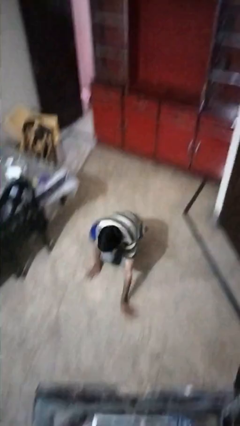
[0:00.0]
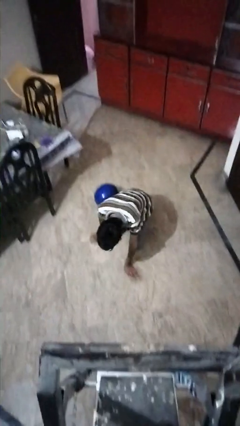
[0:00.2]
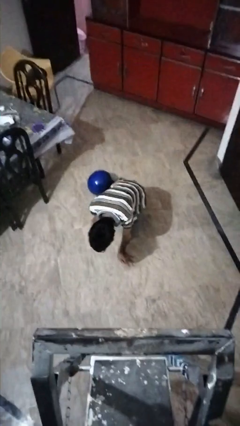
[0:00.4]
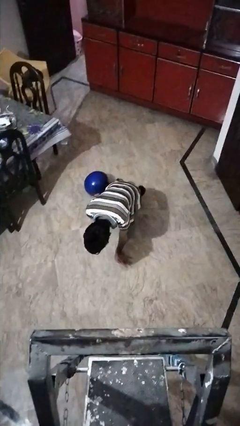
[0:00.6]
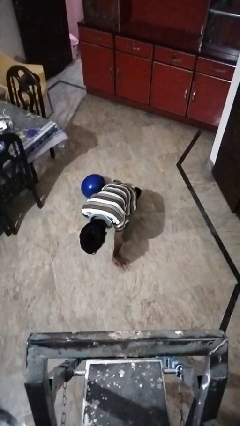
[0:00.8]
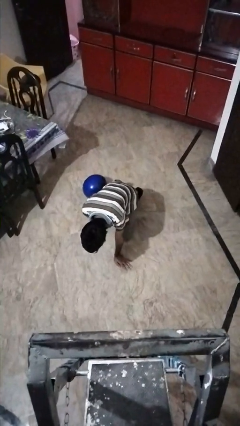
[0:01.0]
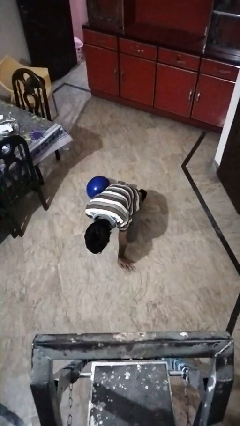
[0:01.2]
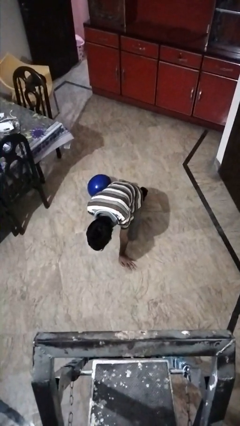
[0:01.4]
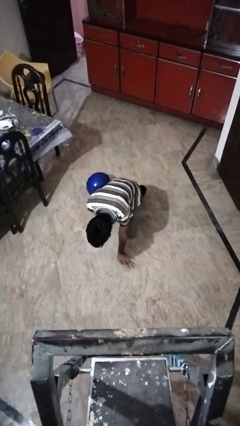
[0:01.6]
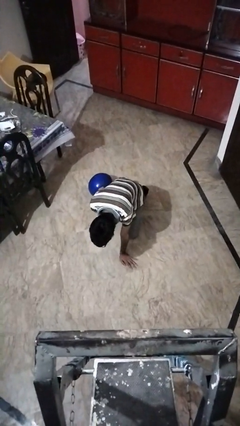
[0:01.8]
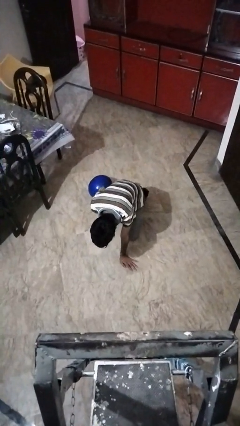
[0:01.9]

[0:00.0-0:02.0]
person trips on object on floor

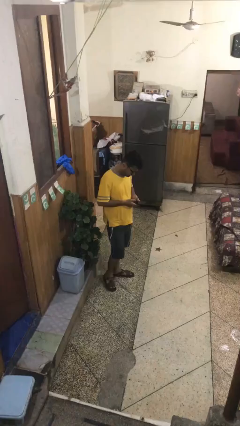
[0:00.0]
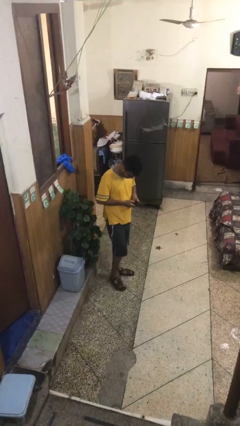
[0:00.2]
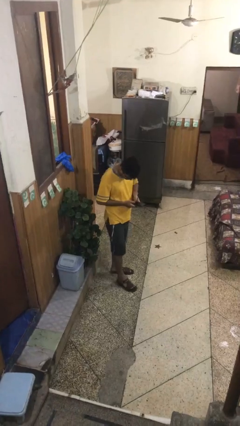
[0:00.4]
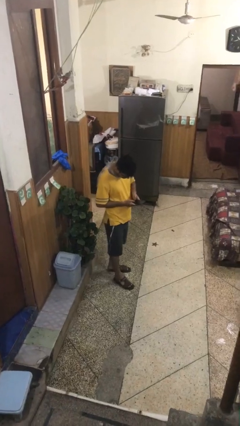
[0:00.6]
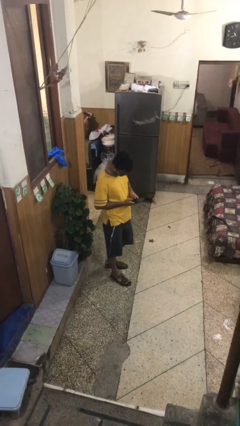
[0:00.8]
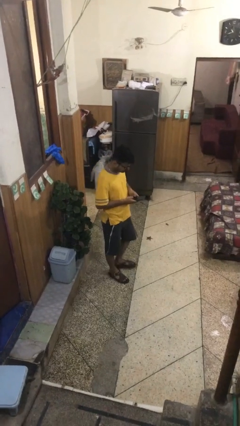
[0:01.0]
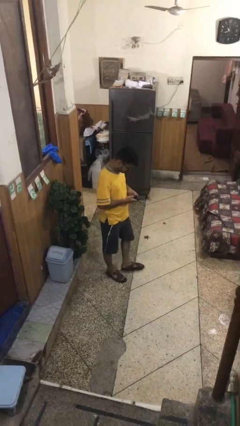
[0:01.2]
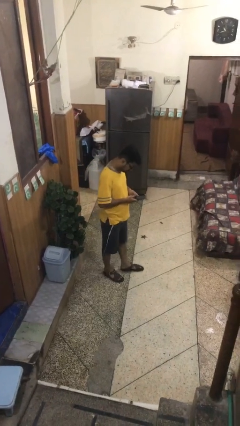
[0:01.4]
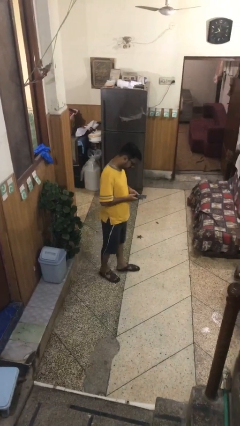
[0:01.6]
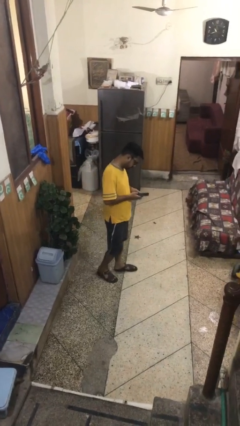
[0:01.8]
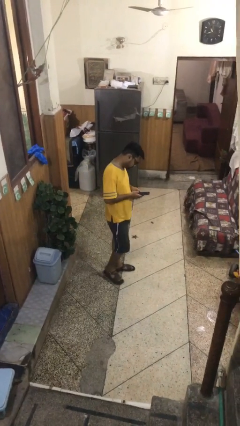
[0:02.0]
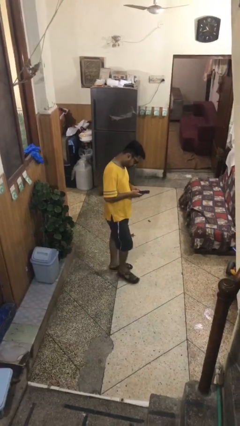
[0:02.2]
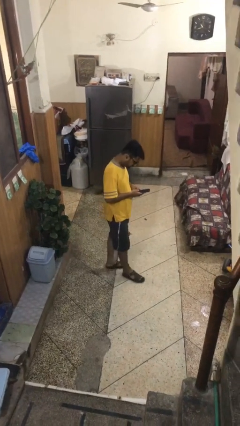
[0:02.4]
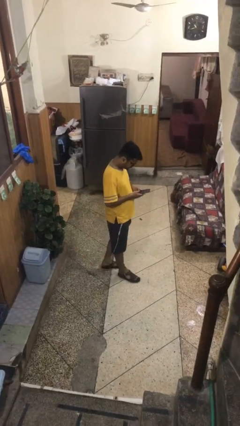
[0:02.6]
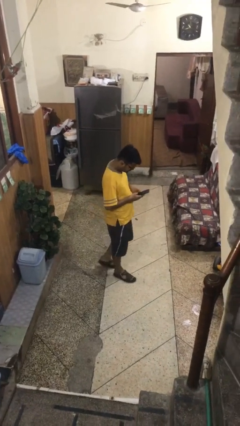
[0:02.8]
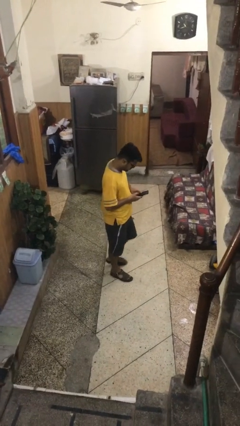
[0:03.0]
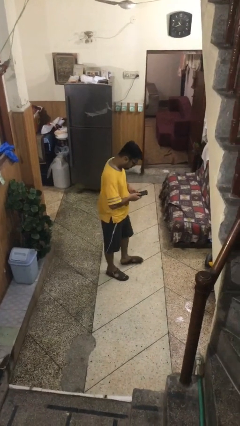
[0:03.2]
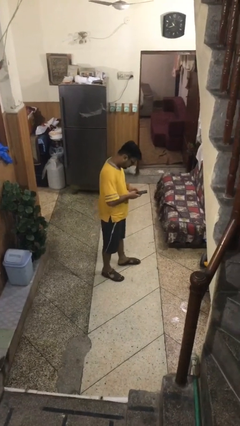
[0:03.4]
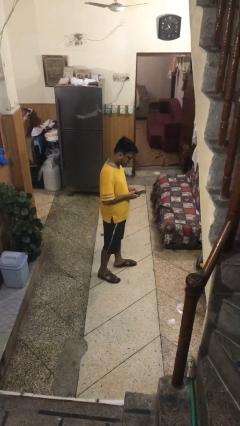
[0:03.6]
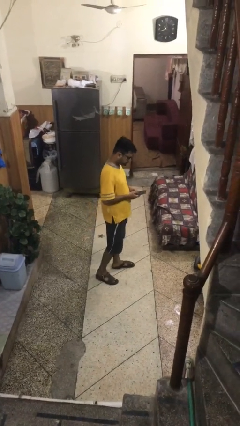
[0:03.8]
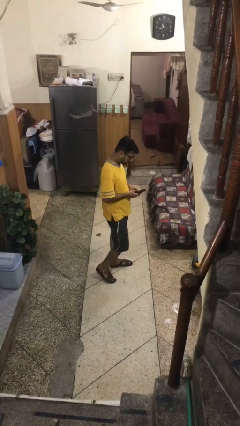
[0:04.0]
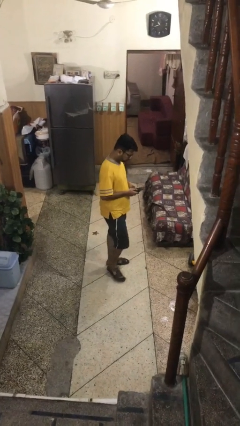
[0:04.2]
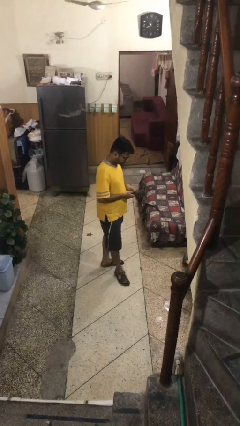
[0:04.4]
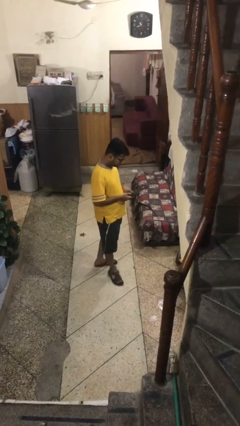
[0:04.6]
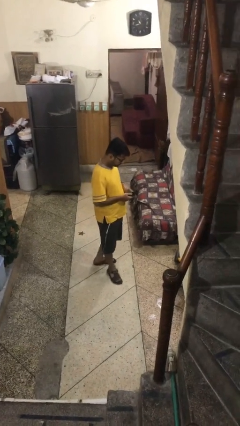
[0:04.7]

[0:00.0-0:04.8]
person texts on phone

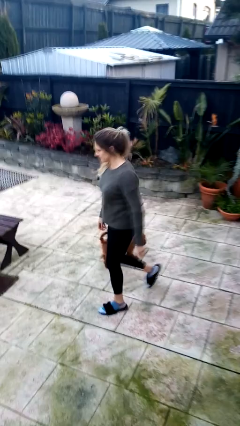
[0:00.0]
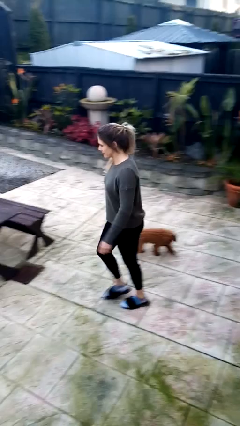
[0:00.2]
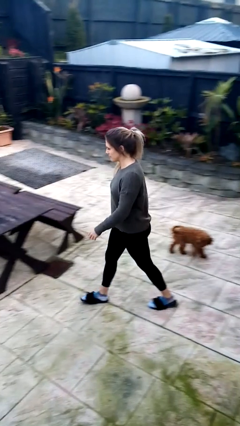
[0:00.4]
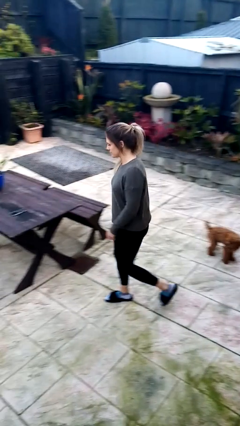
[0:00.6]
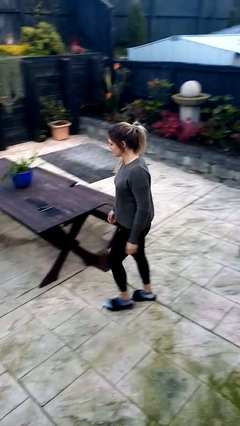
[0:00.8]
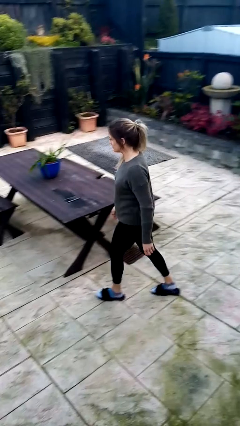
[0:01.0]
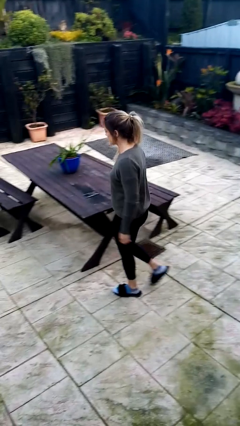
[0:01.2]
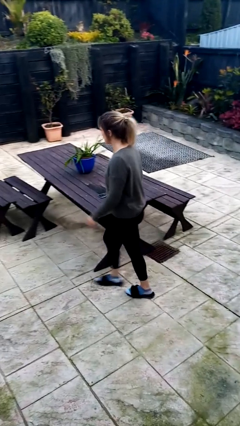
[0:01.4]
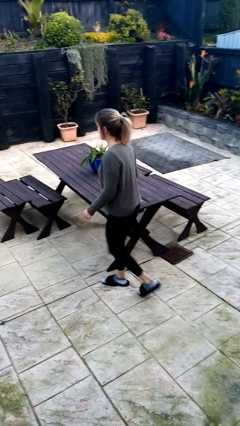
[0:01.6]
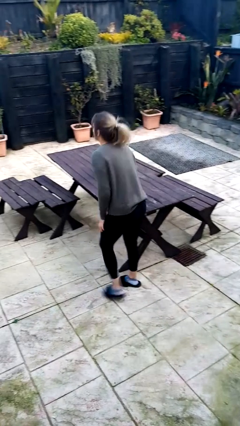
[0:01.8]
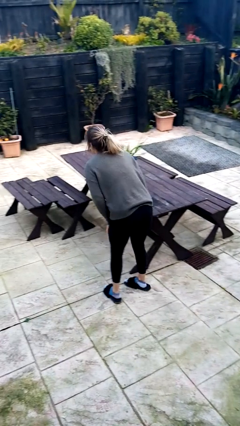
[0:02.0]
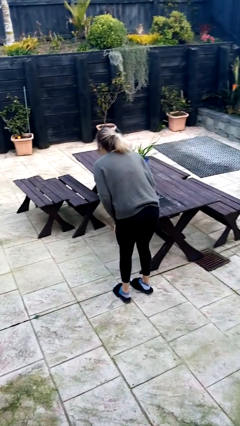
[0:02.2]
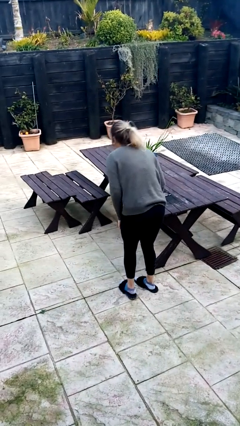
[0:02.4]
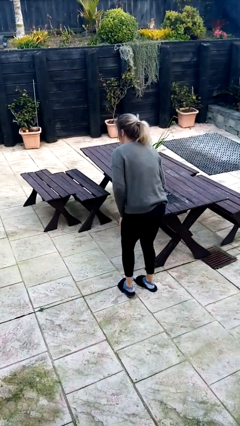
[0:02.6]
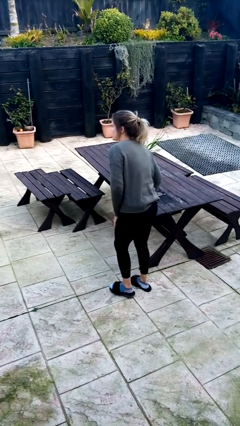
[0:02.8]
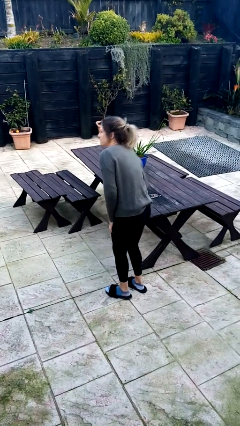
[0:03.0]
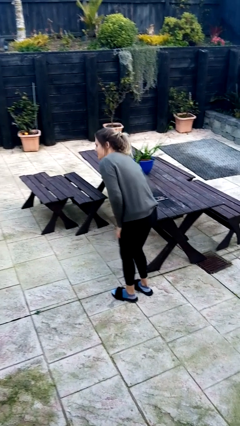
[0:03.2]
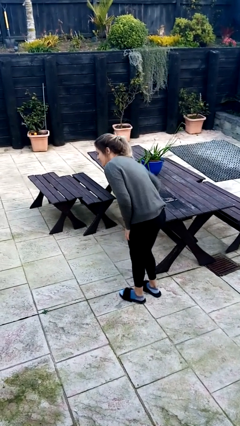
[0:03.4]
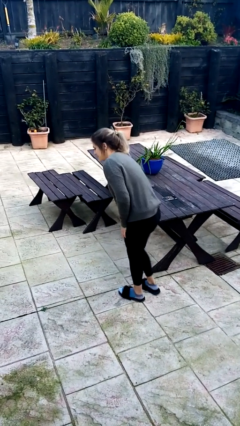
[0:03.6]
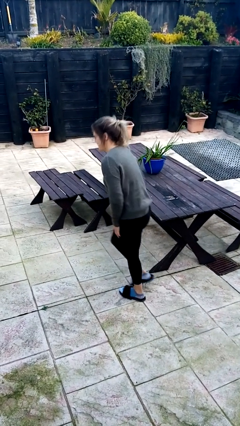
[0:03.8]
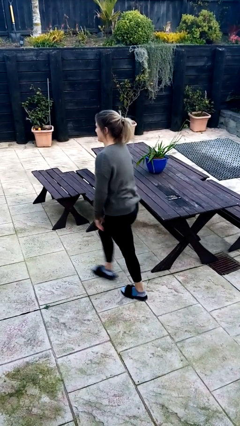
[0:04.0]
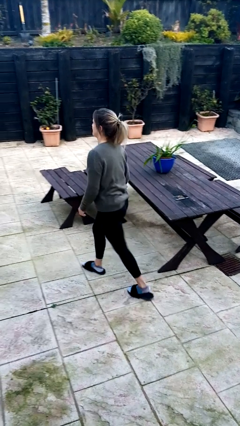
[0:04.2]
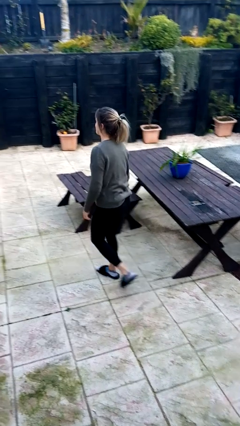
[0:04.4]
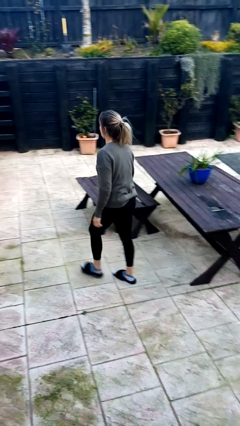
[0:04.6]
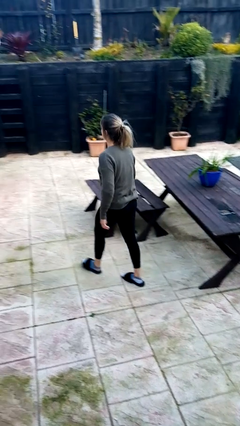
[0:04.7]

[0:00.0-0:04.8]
person bumps into table

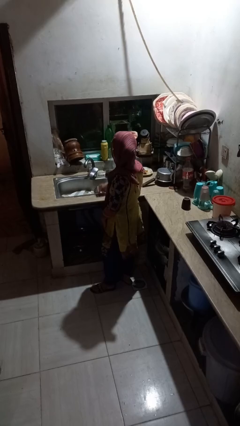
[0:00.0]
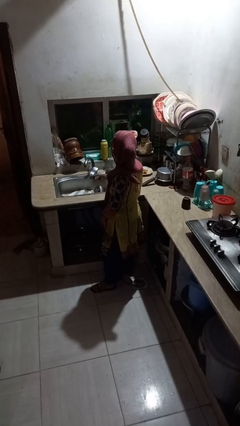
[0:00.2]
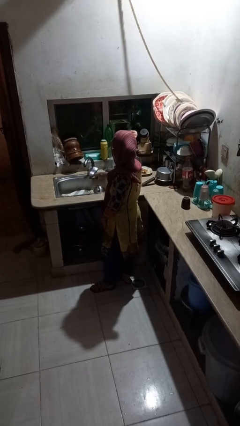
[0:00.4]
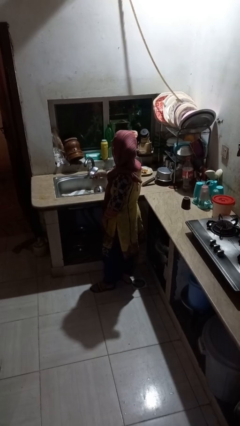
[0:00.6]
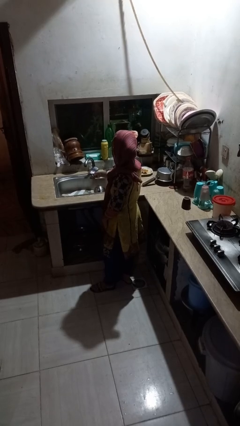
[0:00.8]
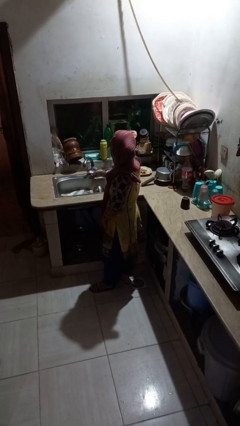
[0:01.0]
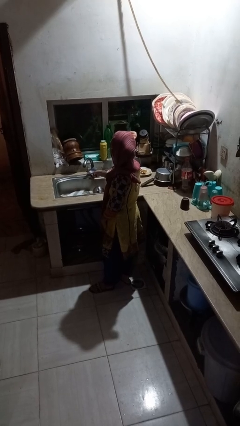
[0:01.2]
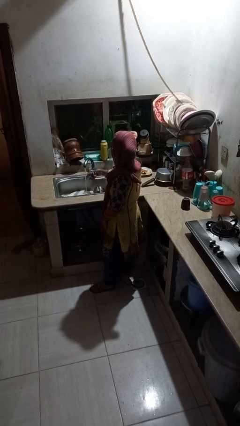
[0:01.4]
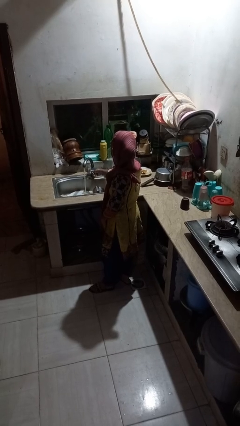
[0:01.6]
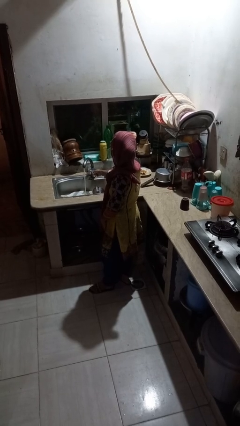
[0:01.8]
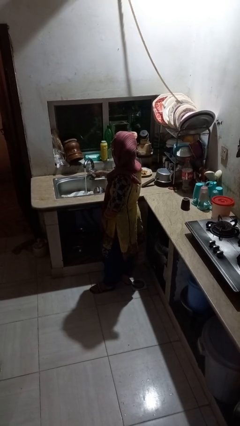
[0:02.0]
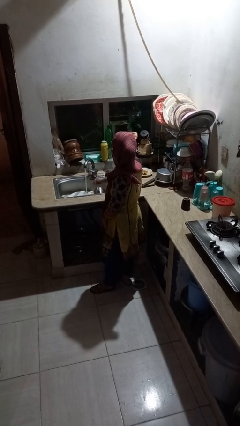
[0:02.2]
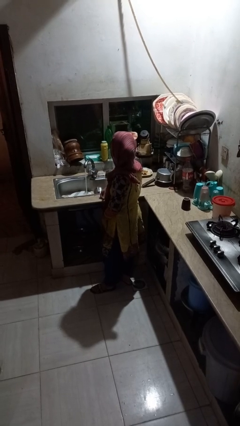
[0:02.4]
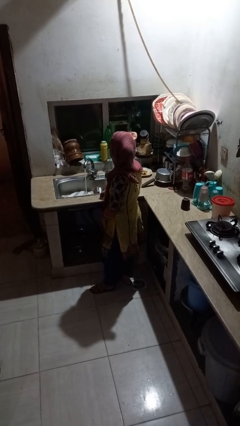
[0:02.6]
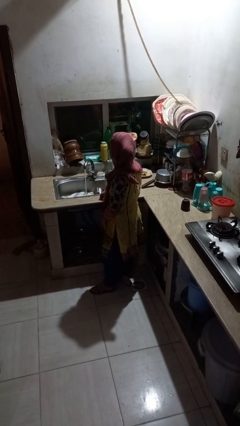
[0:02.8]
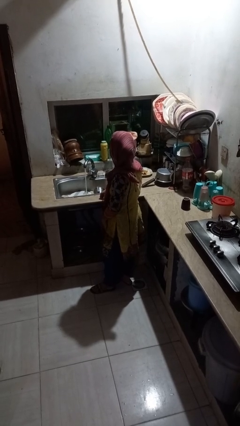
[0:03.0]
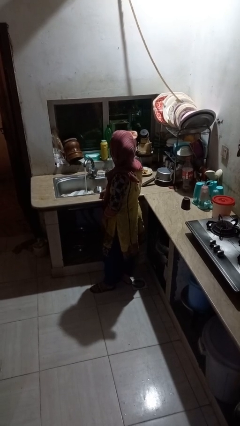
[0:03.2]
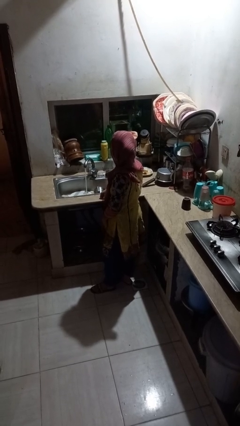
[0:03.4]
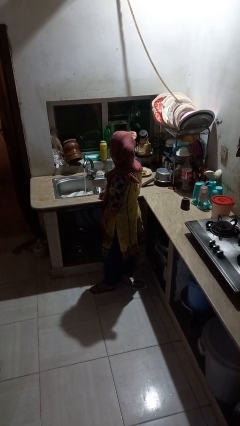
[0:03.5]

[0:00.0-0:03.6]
person turns on faucet

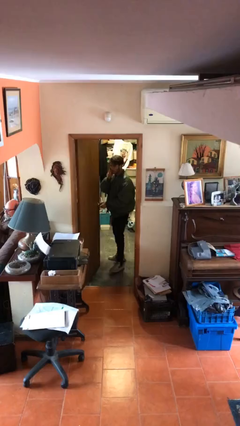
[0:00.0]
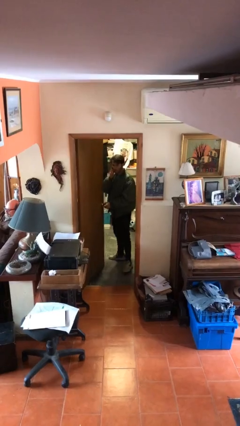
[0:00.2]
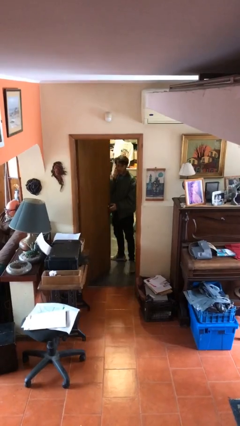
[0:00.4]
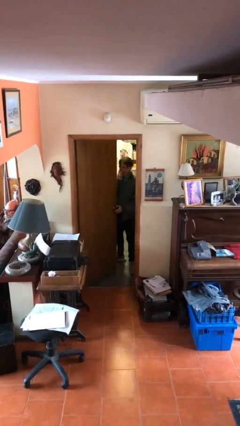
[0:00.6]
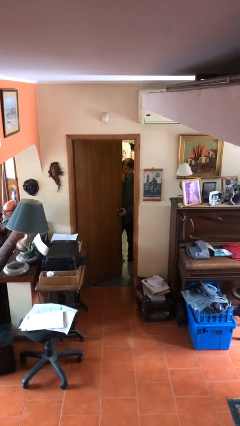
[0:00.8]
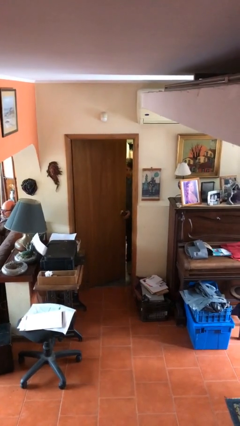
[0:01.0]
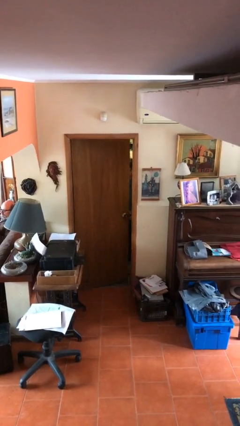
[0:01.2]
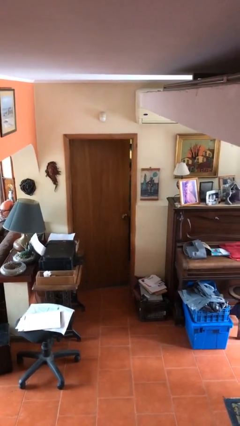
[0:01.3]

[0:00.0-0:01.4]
person closes facility door

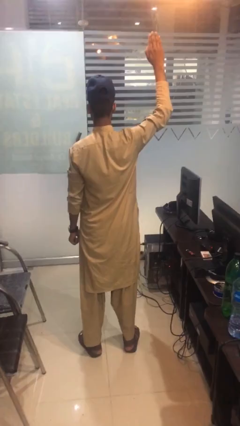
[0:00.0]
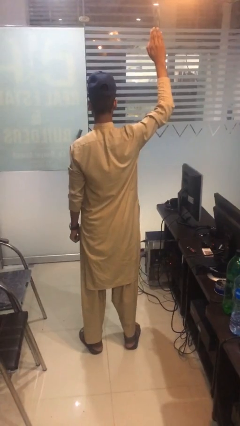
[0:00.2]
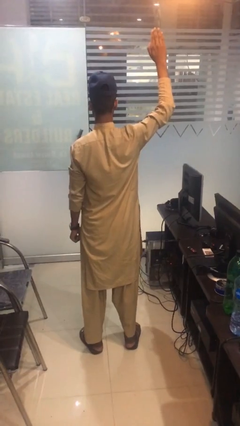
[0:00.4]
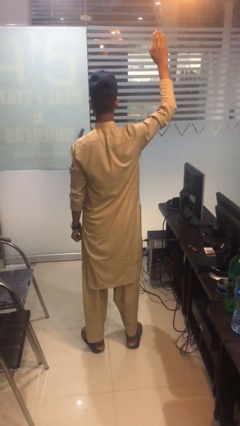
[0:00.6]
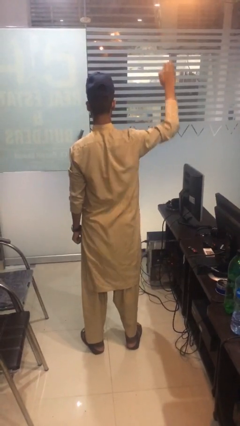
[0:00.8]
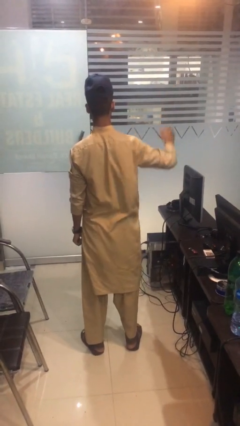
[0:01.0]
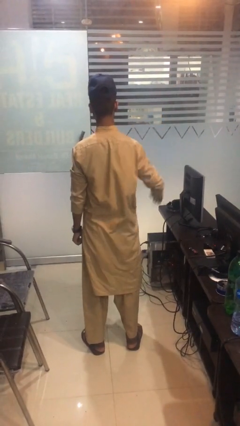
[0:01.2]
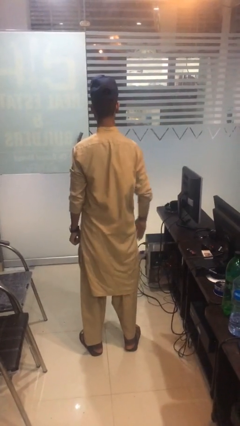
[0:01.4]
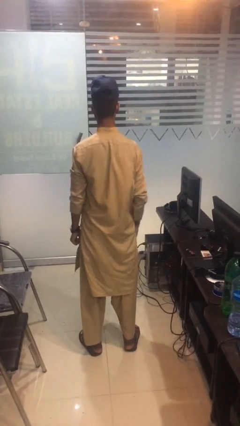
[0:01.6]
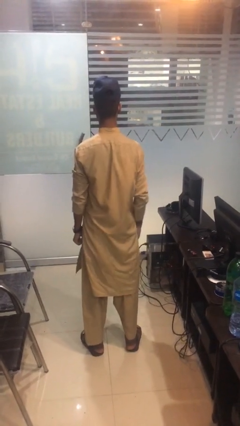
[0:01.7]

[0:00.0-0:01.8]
person gestures lower hand
